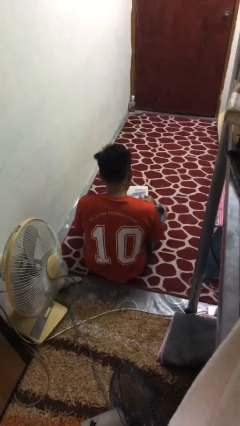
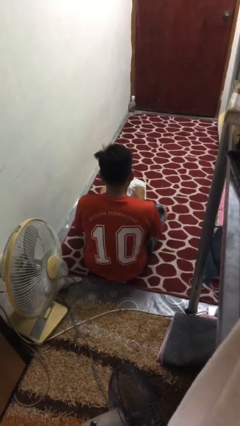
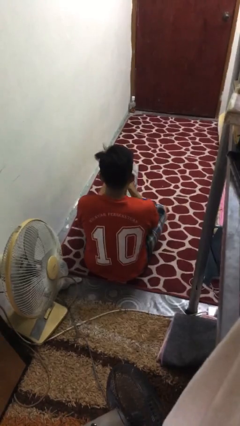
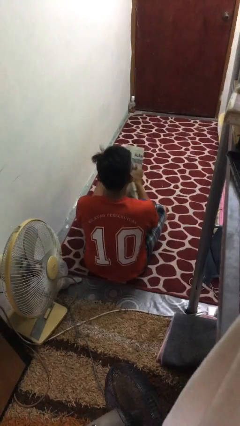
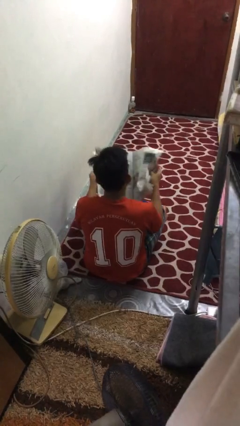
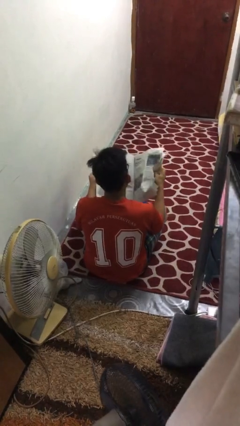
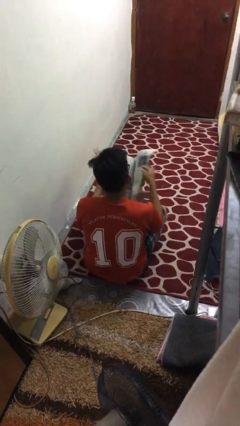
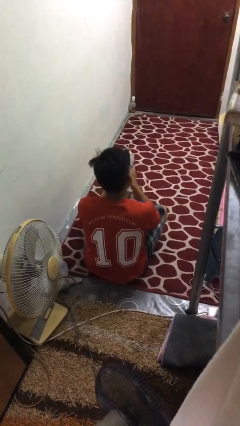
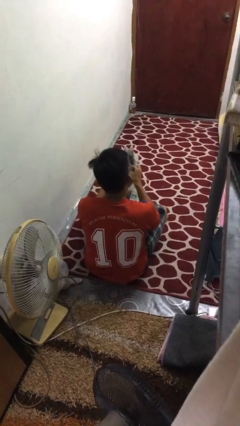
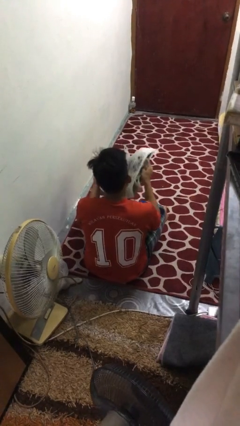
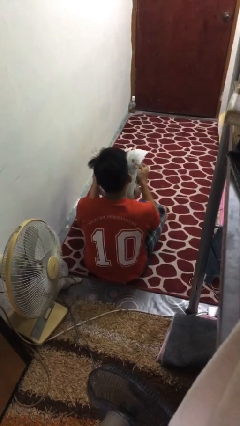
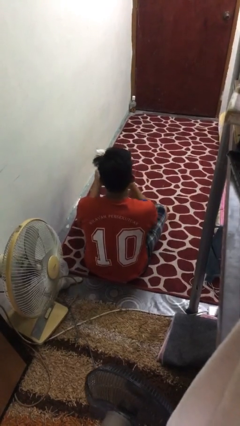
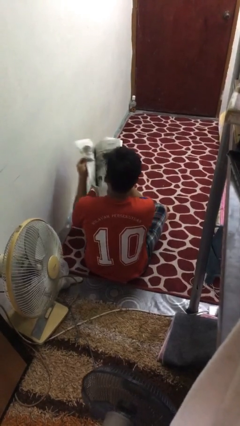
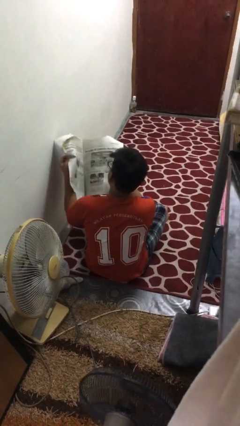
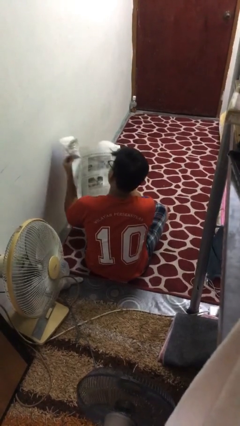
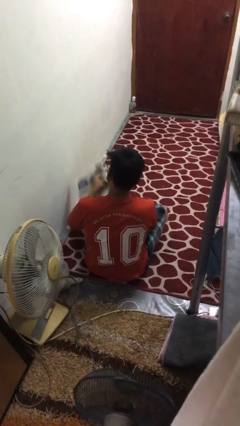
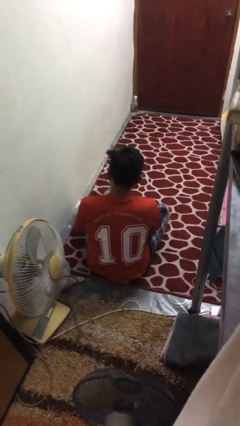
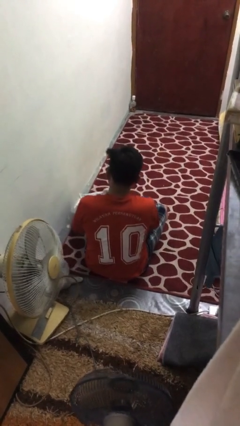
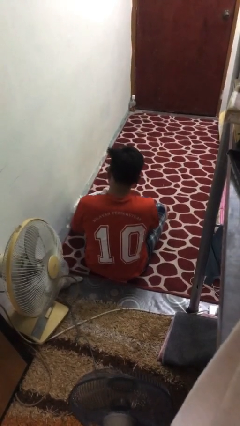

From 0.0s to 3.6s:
person reads newspaper

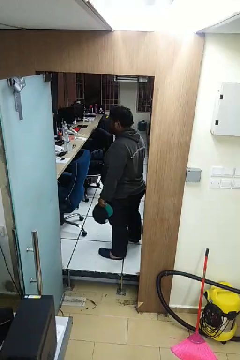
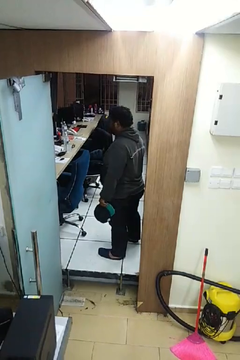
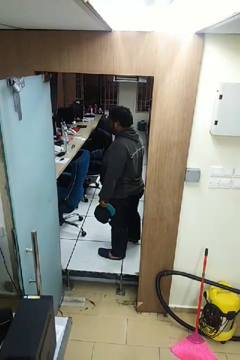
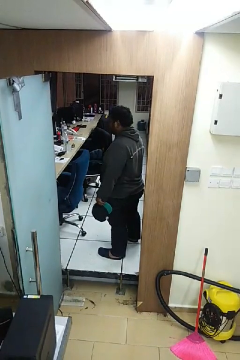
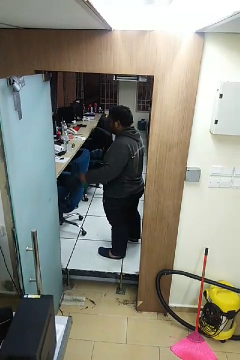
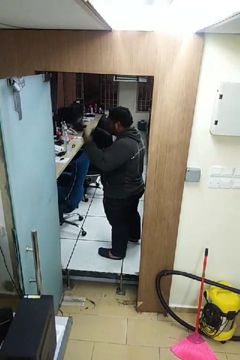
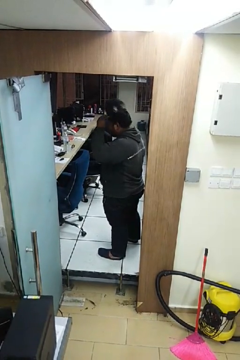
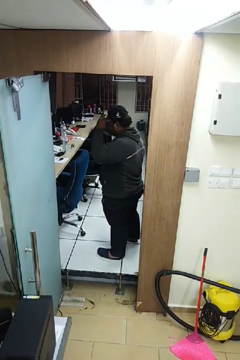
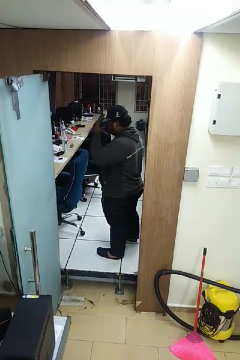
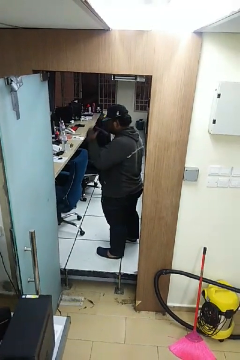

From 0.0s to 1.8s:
person puts on hat

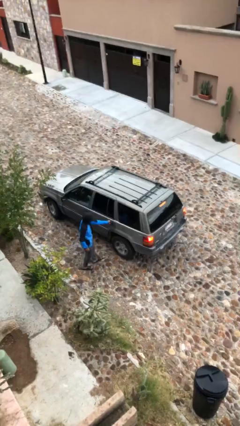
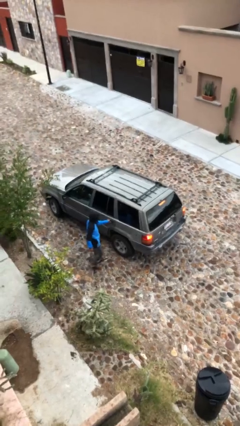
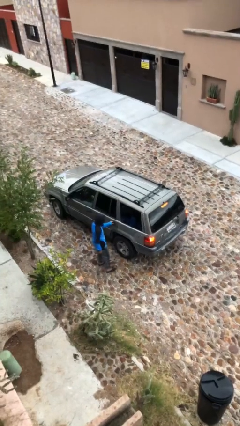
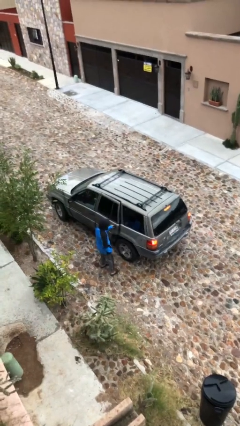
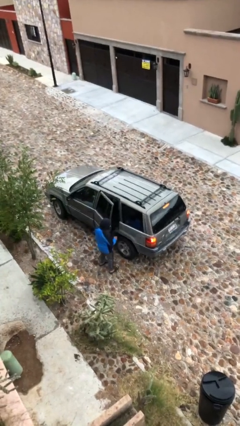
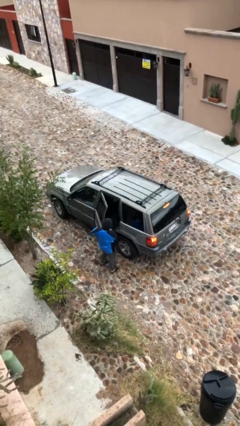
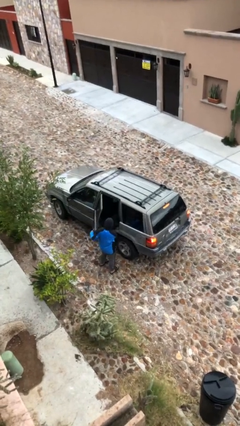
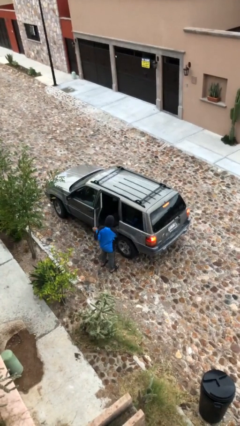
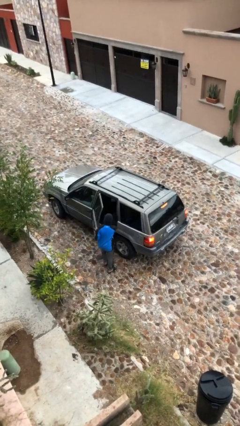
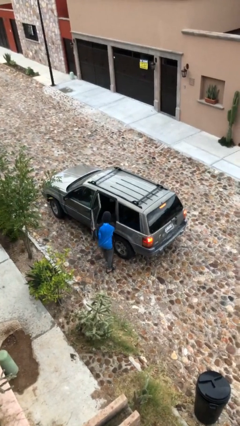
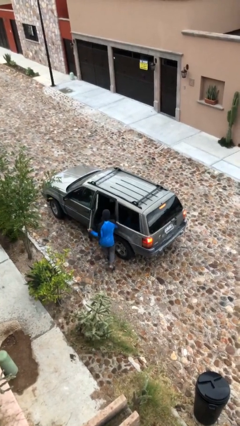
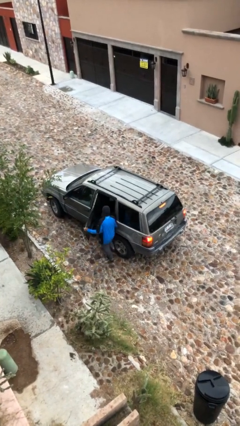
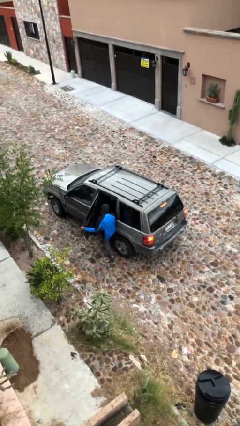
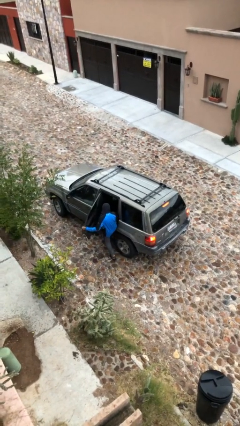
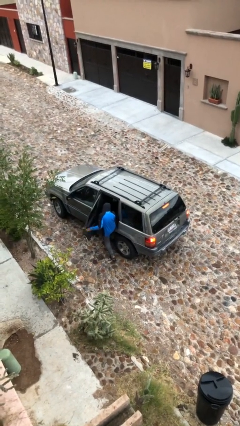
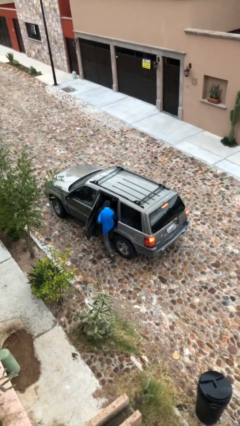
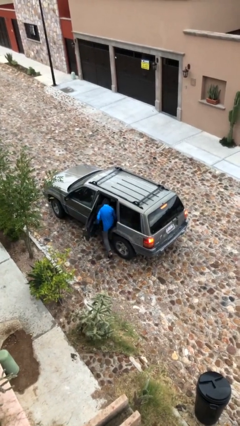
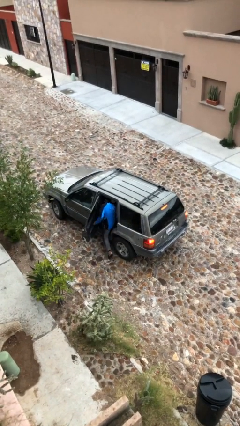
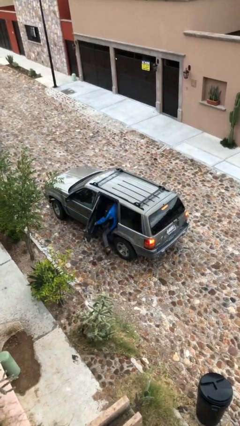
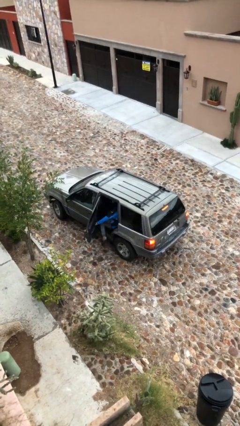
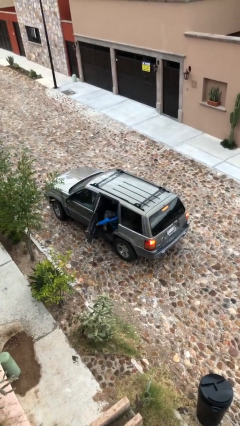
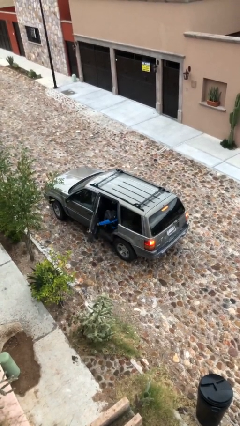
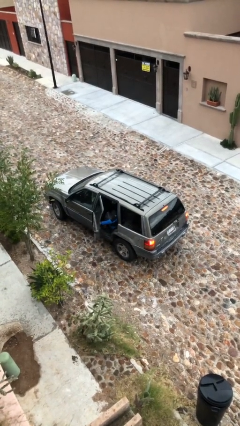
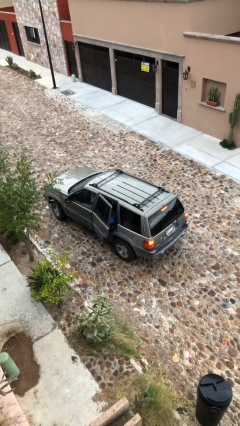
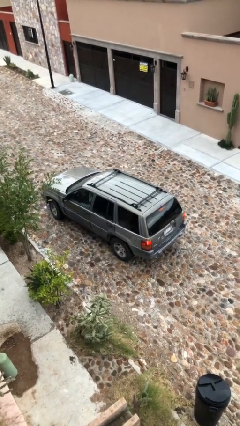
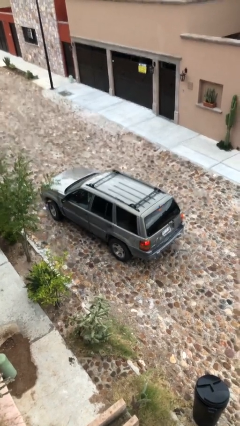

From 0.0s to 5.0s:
car picks up person

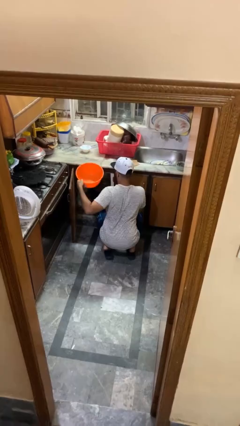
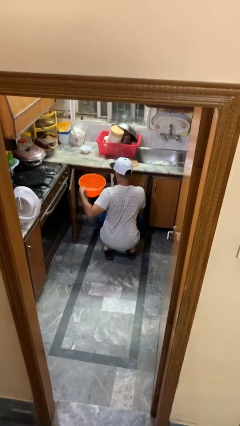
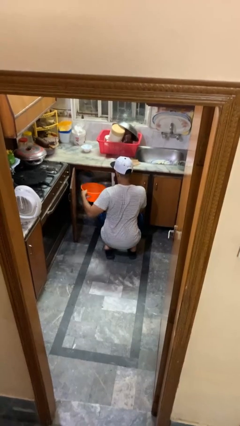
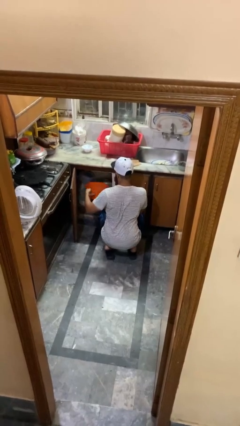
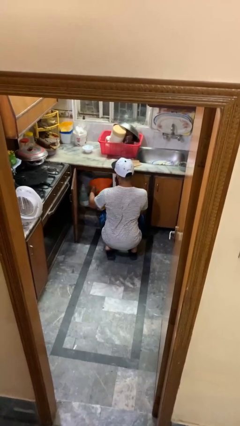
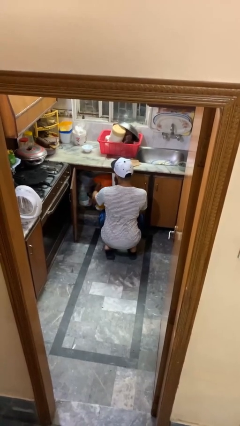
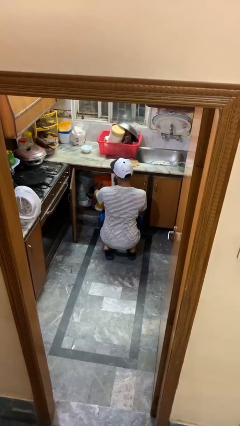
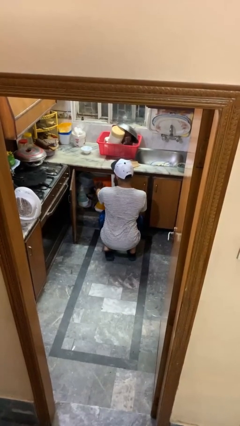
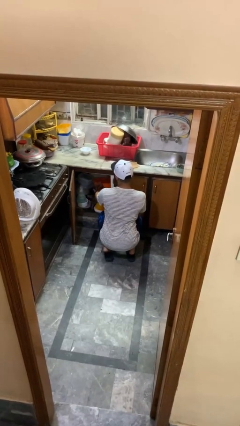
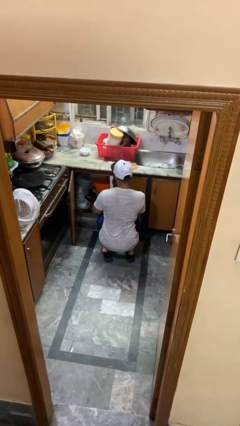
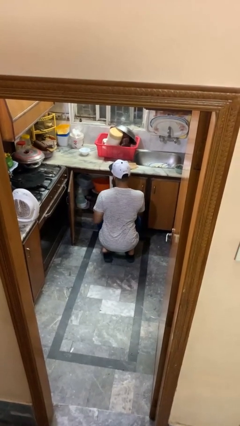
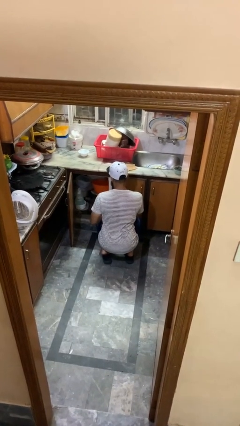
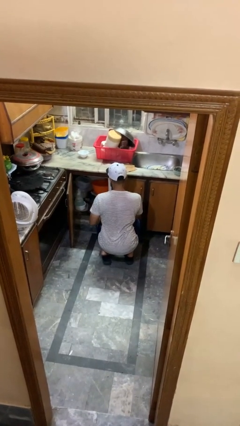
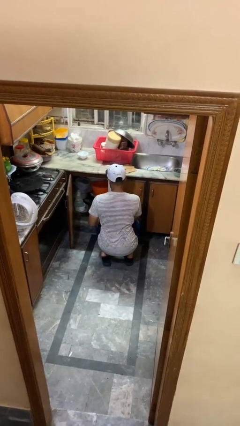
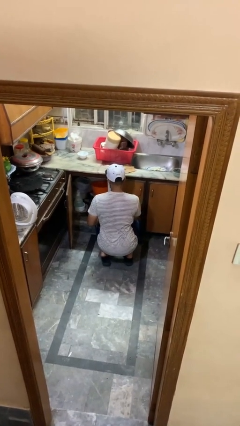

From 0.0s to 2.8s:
person puts object into kitchen drawer

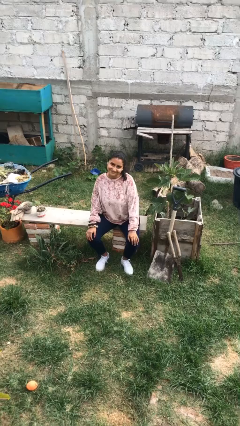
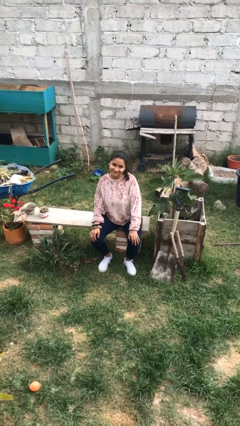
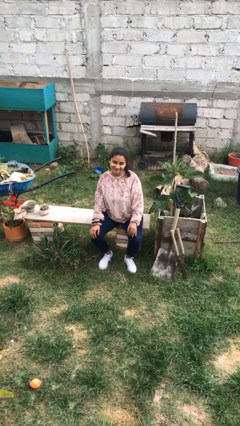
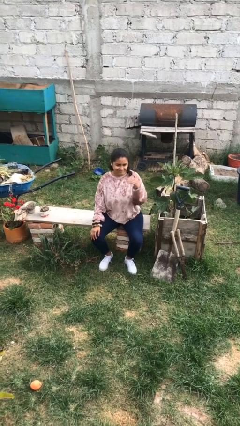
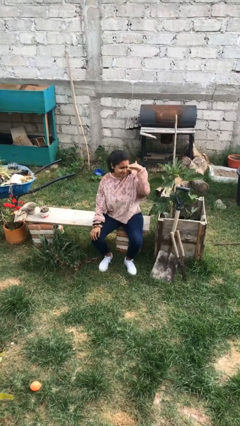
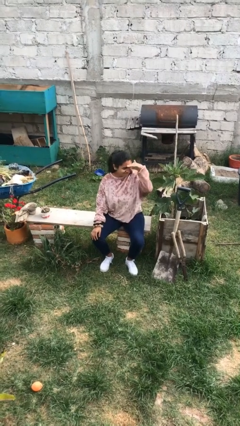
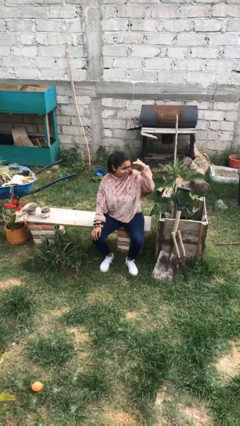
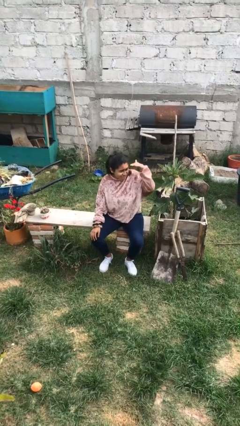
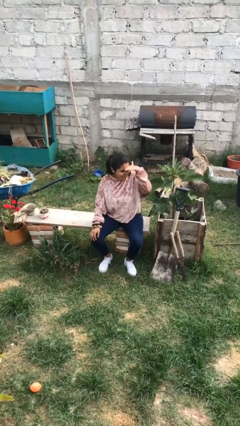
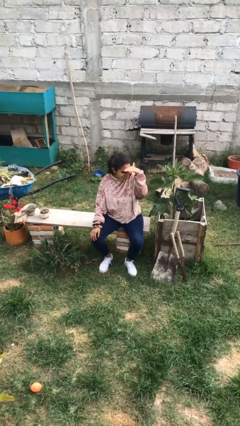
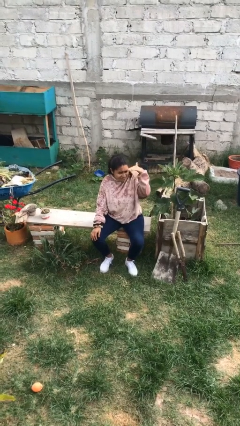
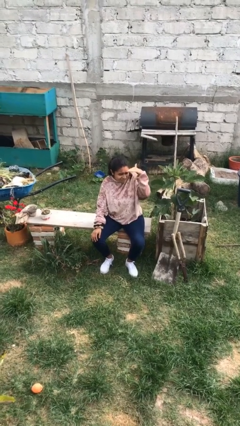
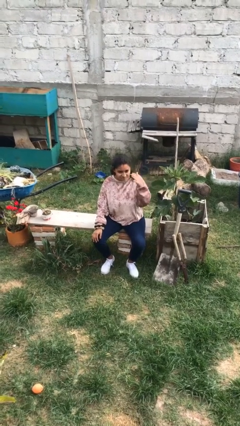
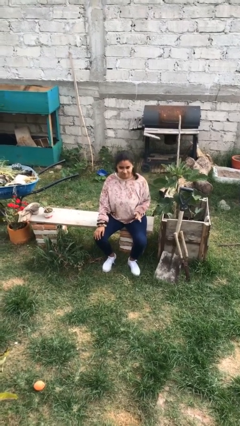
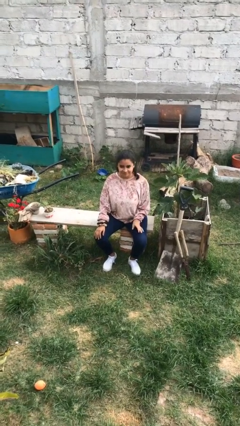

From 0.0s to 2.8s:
person shades eyes

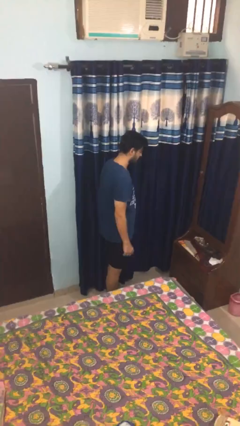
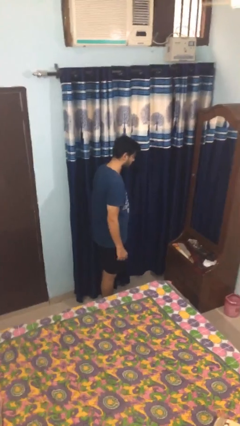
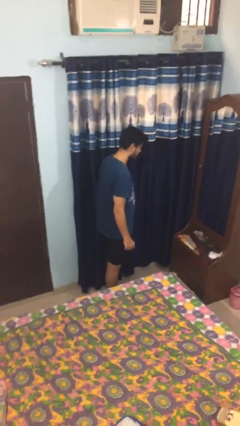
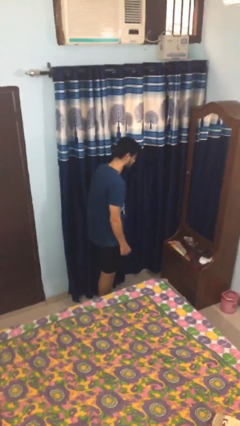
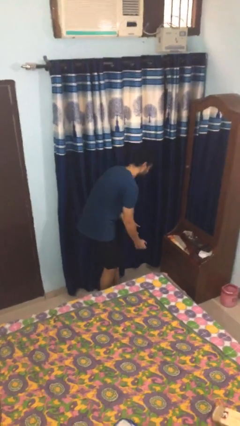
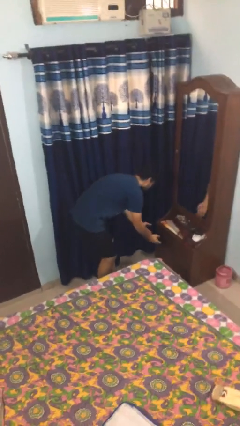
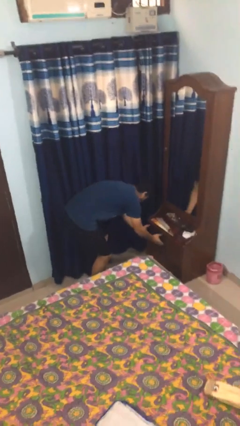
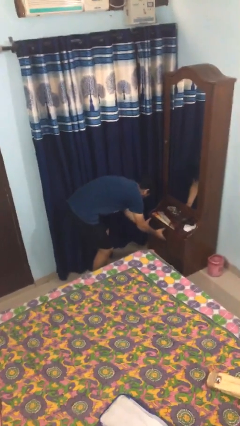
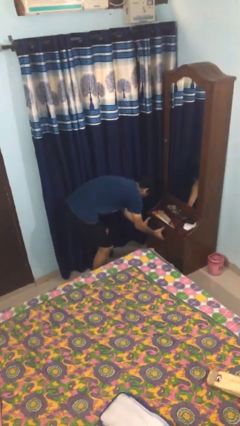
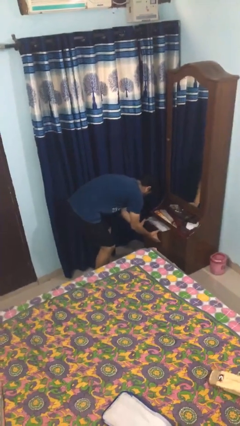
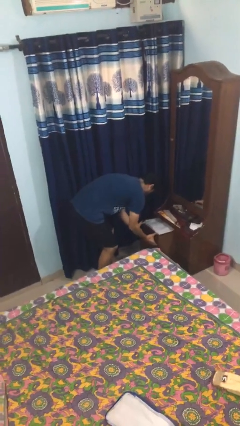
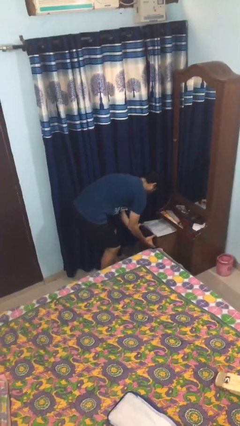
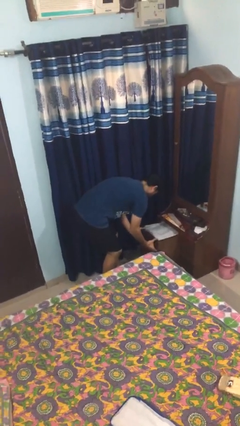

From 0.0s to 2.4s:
person opens dresser drawer
